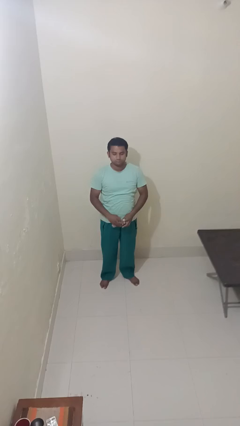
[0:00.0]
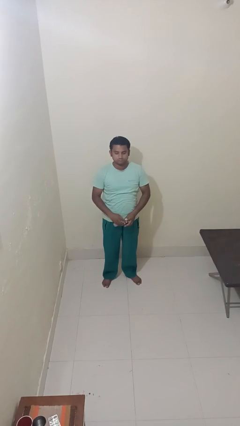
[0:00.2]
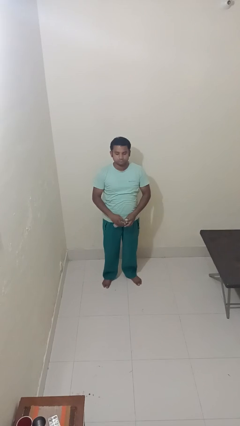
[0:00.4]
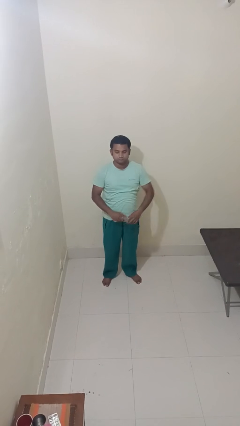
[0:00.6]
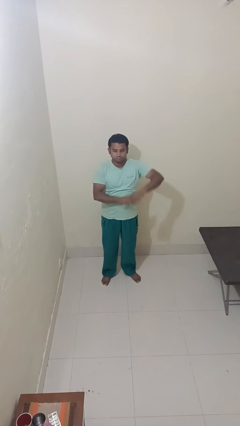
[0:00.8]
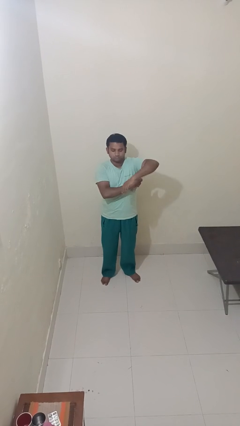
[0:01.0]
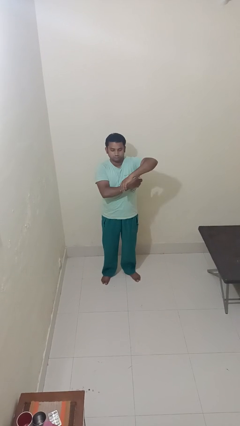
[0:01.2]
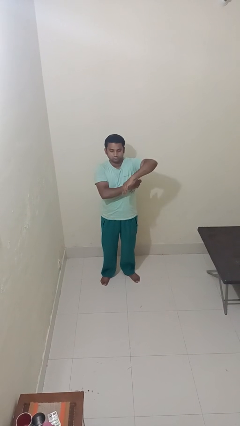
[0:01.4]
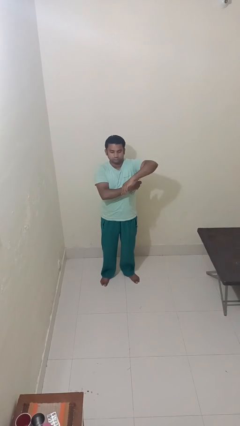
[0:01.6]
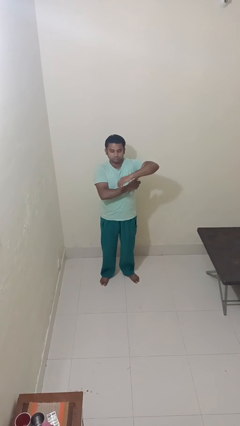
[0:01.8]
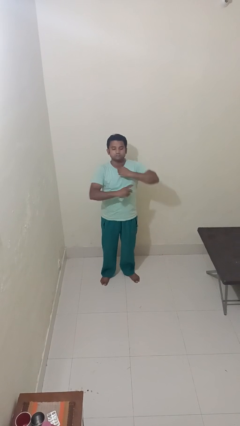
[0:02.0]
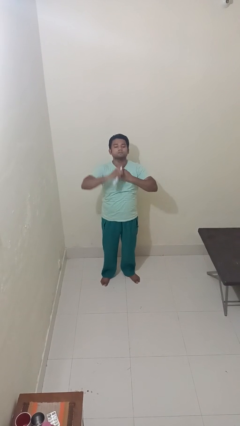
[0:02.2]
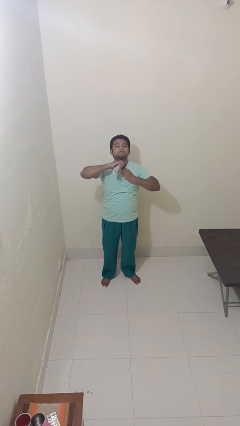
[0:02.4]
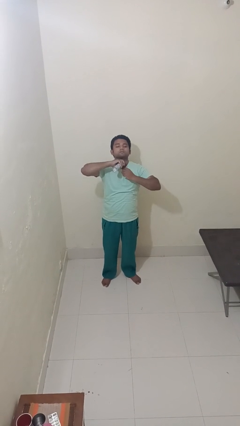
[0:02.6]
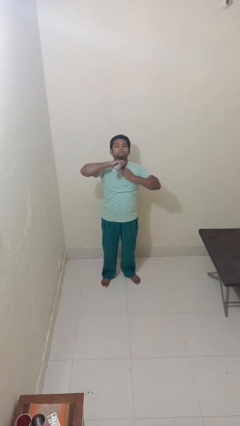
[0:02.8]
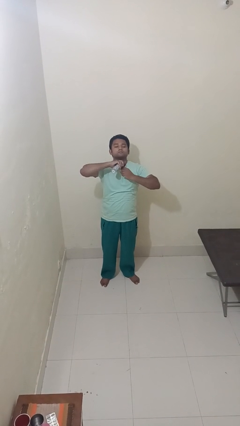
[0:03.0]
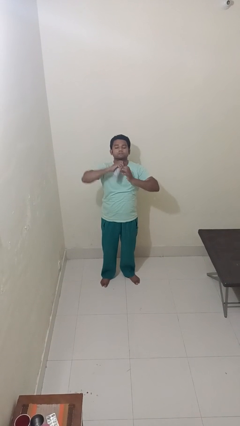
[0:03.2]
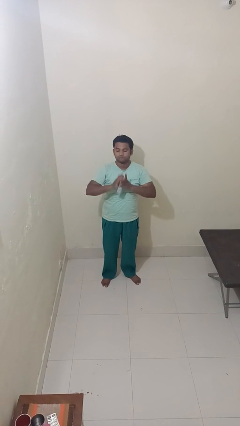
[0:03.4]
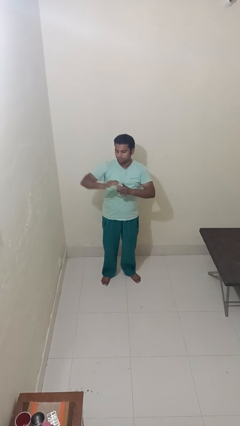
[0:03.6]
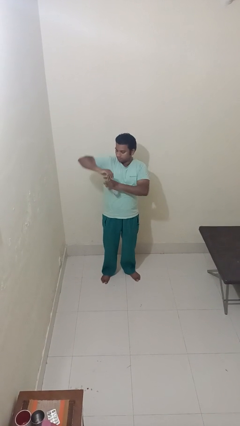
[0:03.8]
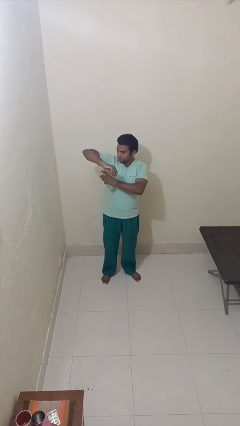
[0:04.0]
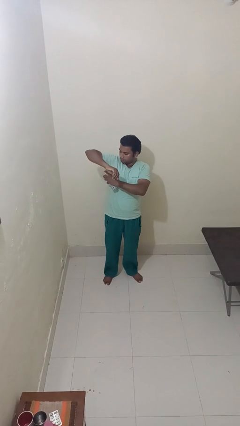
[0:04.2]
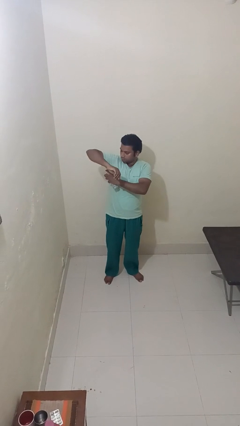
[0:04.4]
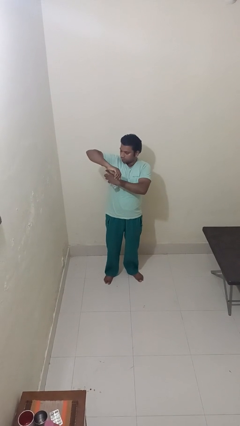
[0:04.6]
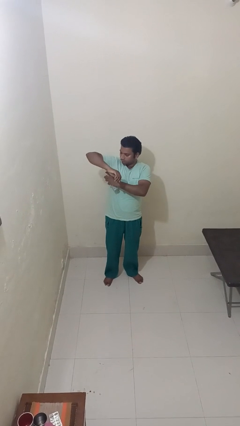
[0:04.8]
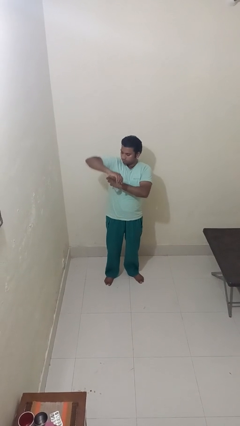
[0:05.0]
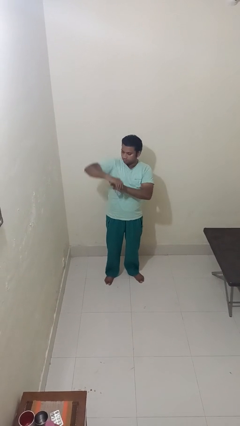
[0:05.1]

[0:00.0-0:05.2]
person applies deodorant

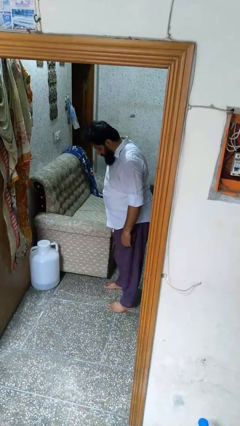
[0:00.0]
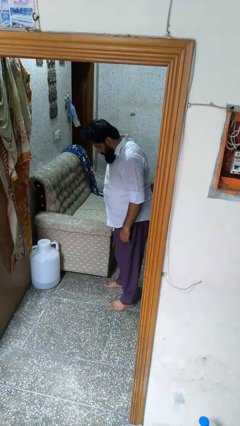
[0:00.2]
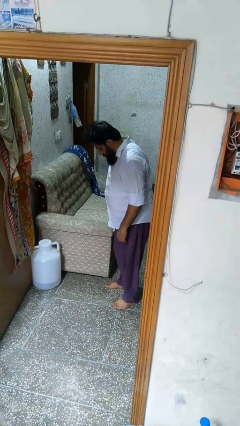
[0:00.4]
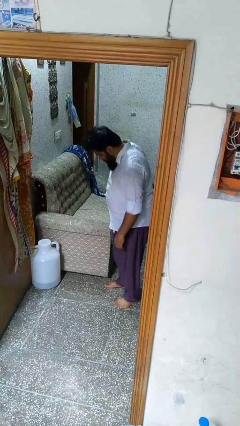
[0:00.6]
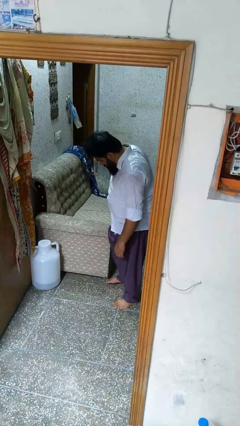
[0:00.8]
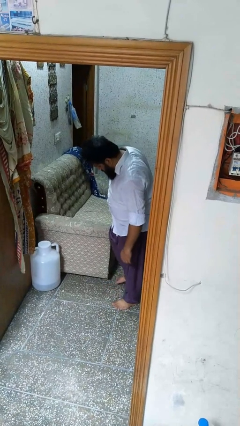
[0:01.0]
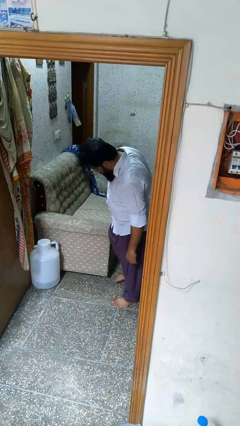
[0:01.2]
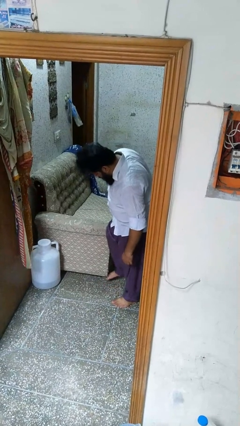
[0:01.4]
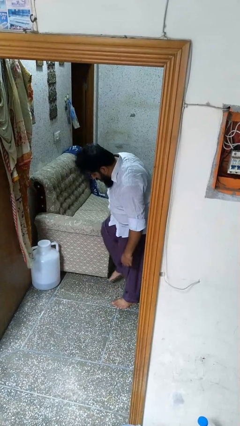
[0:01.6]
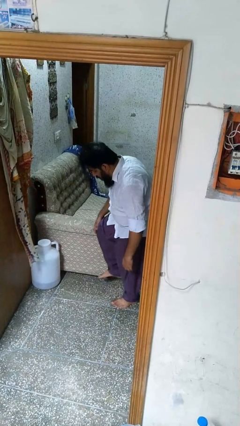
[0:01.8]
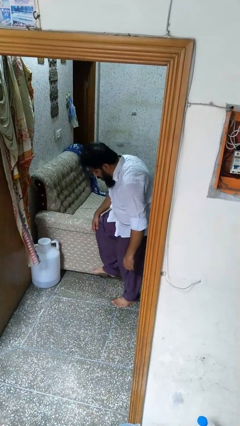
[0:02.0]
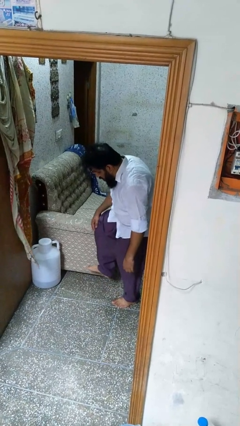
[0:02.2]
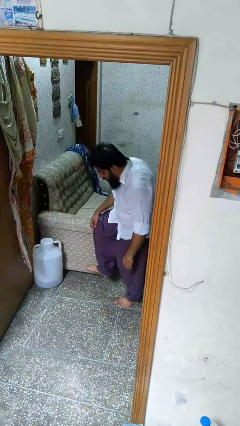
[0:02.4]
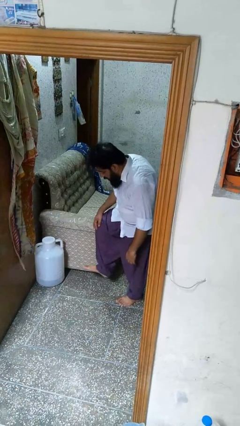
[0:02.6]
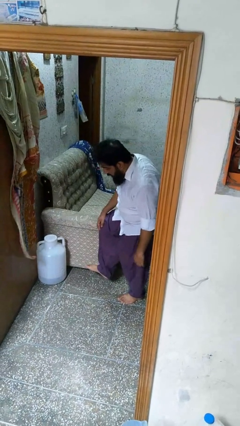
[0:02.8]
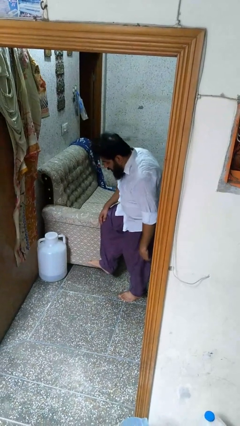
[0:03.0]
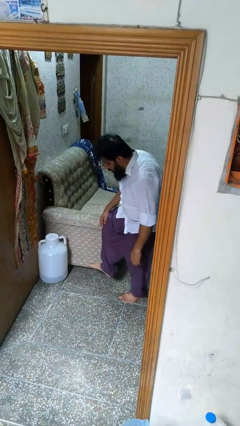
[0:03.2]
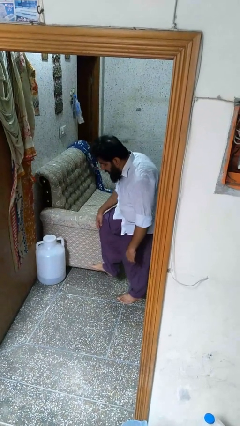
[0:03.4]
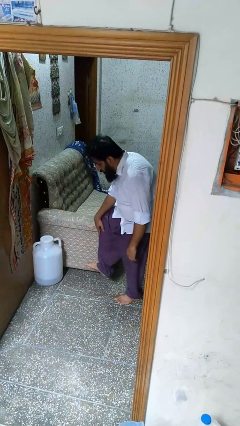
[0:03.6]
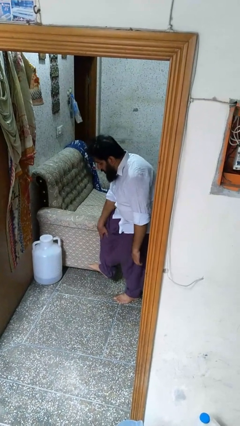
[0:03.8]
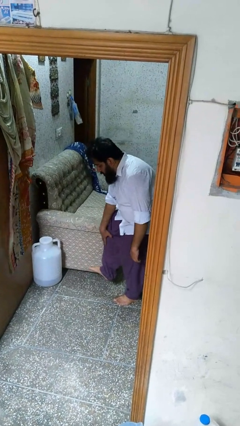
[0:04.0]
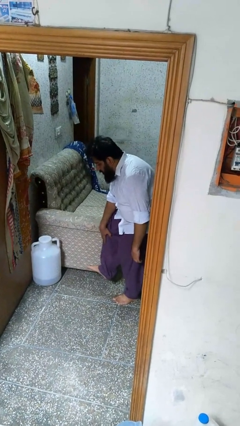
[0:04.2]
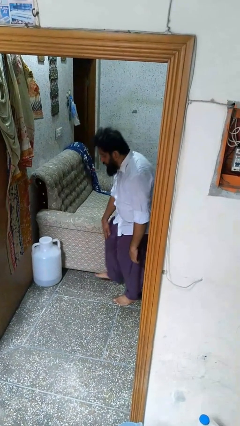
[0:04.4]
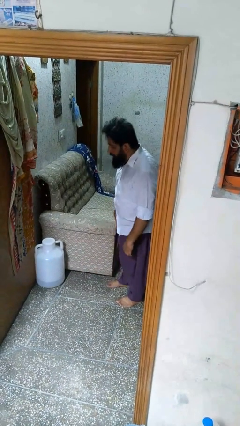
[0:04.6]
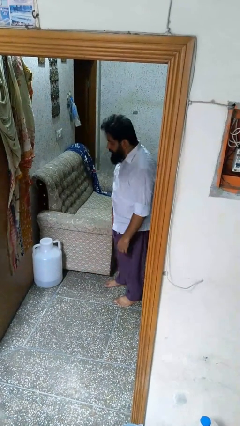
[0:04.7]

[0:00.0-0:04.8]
person stubs toe

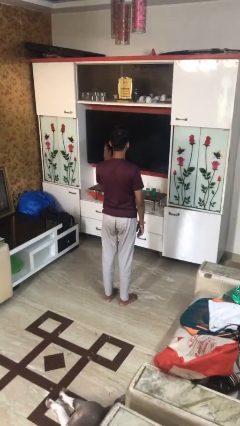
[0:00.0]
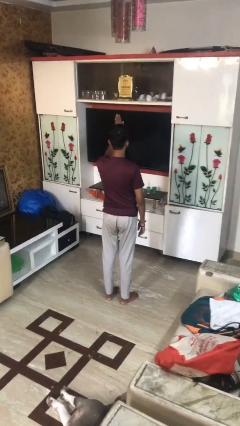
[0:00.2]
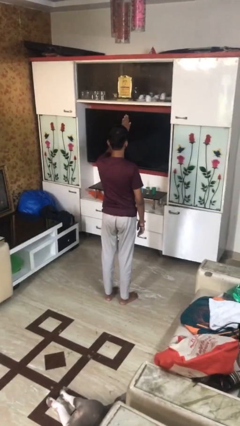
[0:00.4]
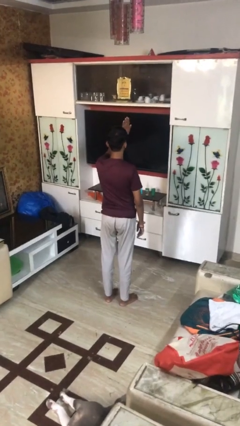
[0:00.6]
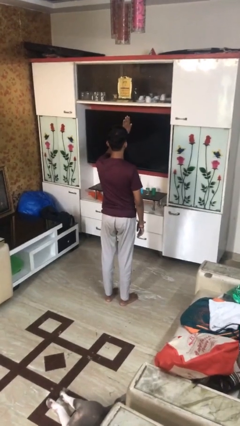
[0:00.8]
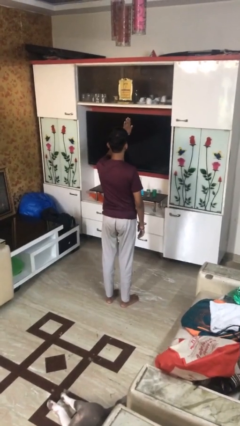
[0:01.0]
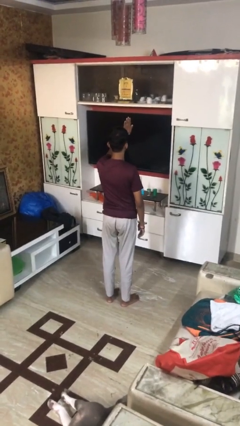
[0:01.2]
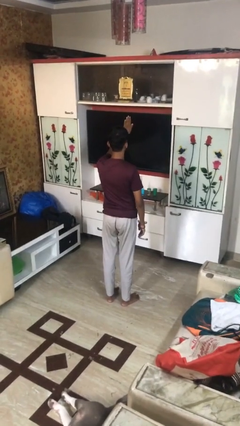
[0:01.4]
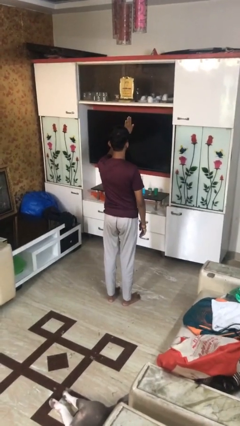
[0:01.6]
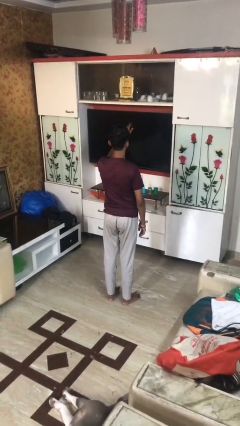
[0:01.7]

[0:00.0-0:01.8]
person gestures stop

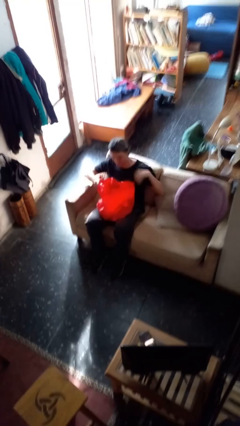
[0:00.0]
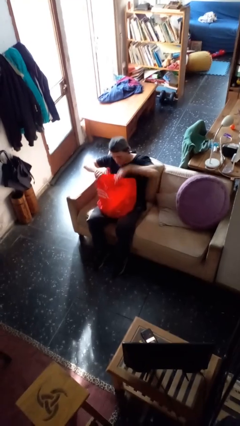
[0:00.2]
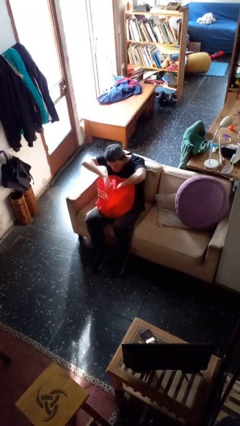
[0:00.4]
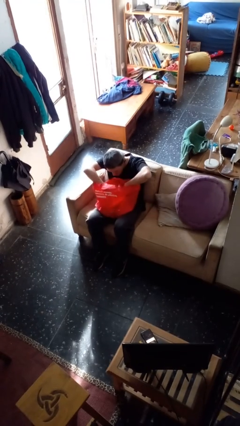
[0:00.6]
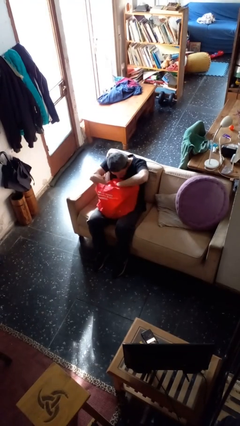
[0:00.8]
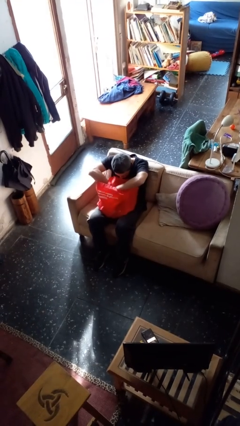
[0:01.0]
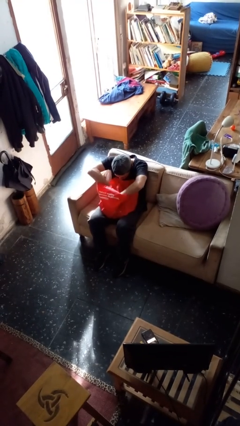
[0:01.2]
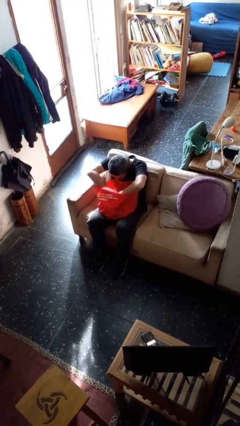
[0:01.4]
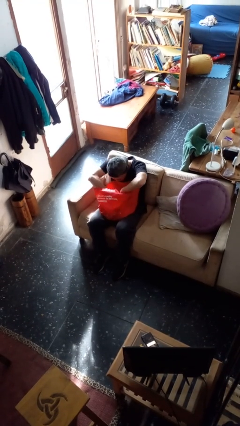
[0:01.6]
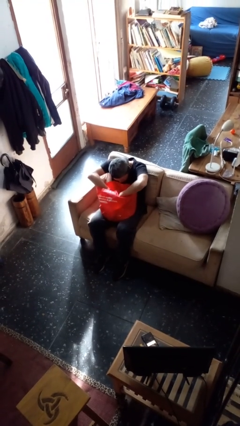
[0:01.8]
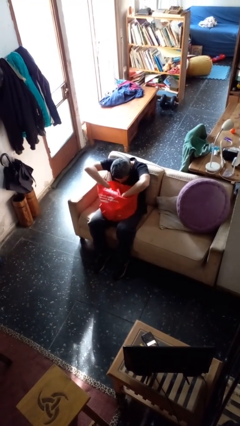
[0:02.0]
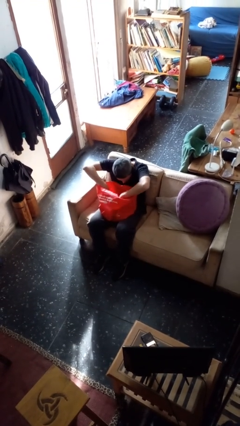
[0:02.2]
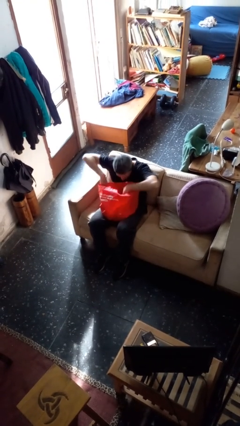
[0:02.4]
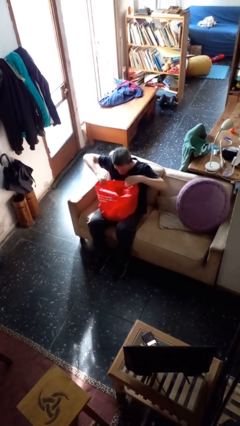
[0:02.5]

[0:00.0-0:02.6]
person searches in bag

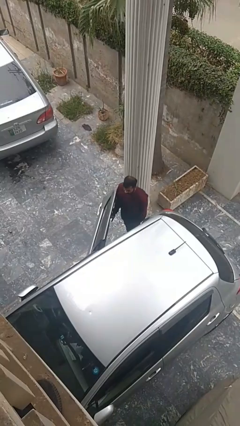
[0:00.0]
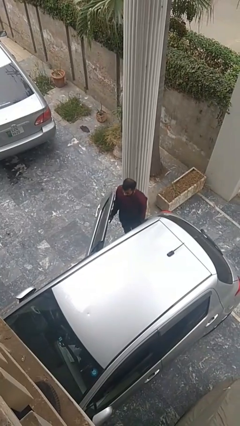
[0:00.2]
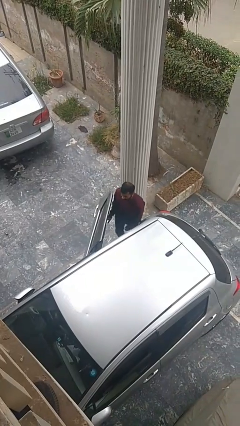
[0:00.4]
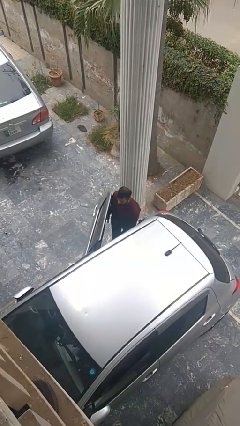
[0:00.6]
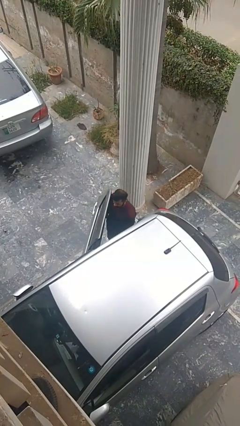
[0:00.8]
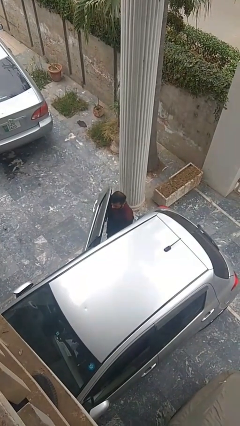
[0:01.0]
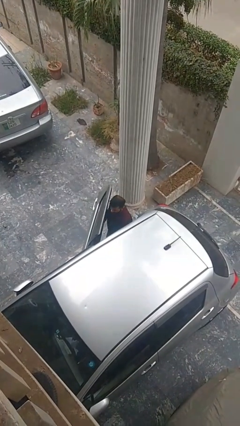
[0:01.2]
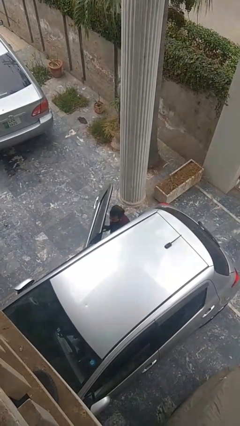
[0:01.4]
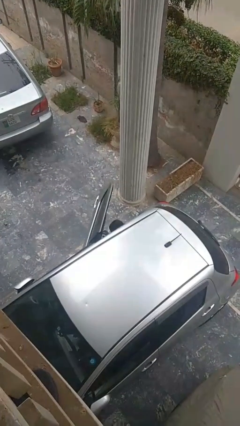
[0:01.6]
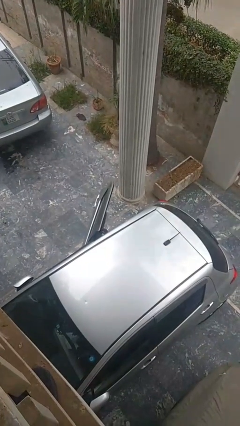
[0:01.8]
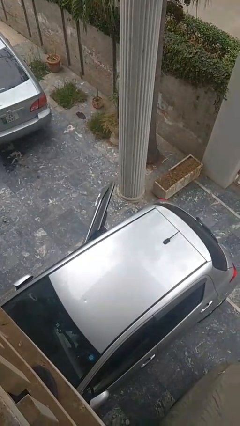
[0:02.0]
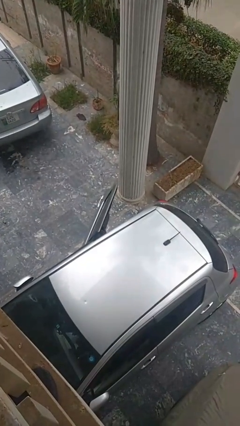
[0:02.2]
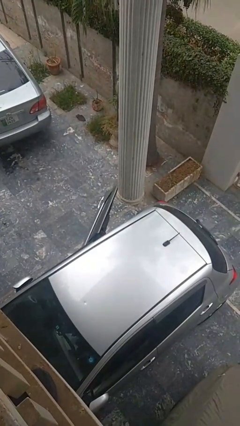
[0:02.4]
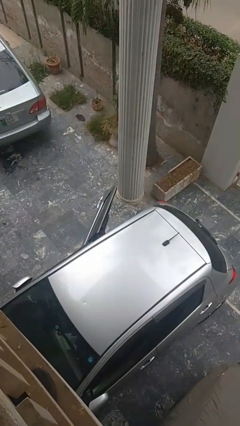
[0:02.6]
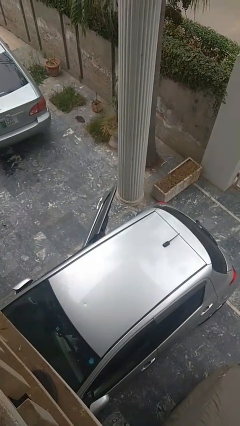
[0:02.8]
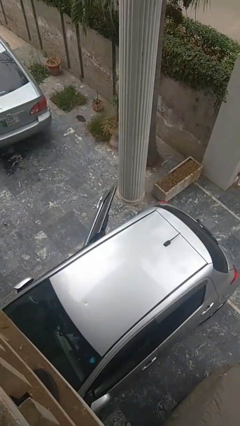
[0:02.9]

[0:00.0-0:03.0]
person enters car

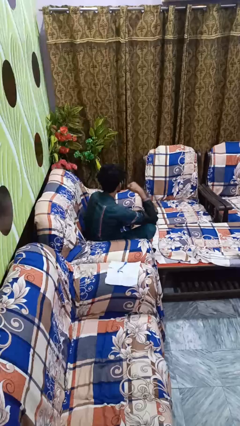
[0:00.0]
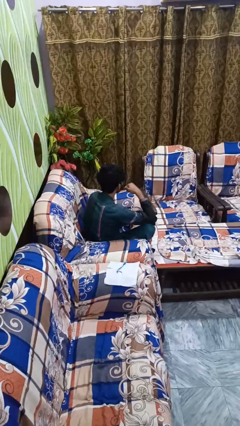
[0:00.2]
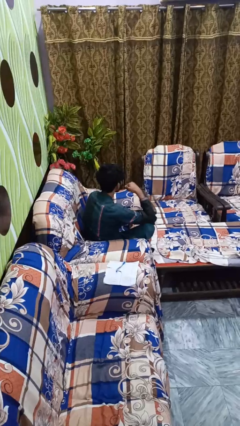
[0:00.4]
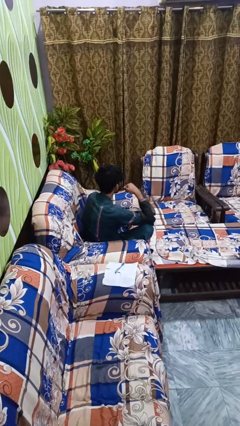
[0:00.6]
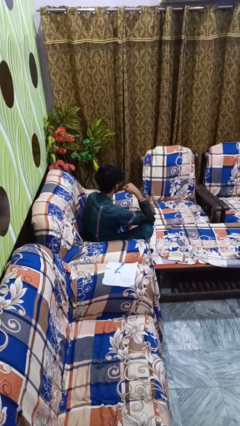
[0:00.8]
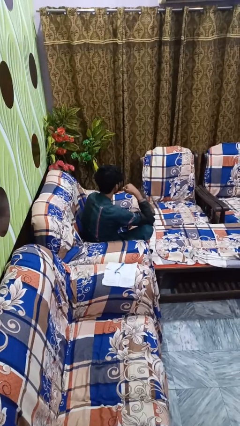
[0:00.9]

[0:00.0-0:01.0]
person gestures call me
